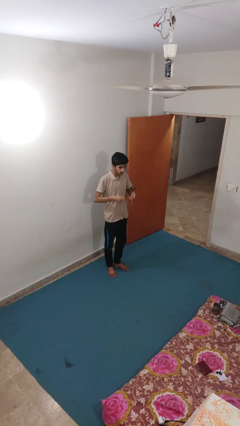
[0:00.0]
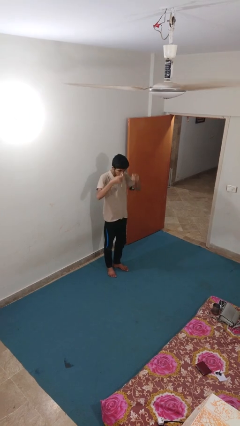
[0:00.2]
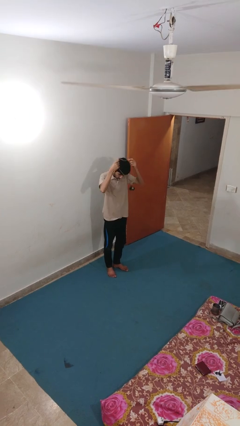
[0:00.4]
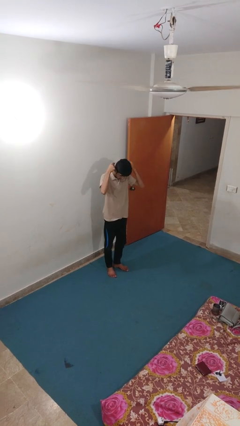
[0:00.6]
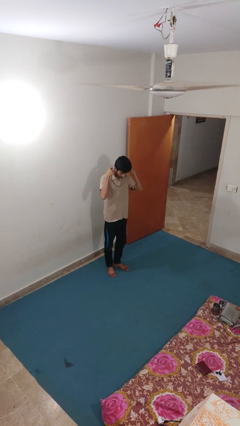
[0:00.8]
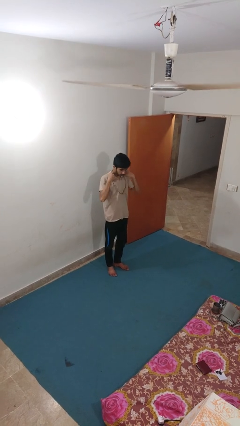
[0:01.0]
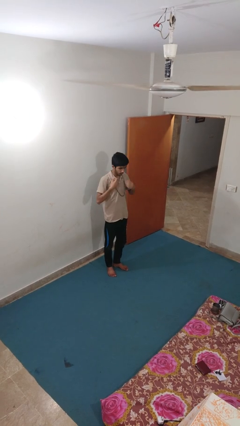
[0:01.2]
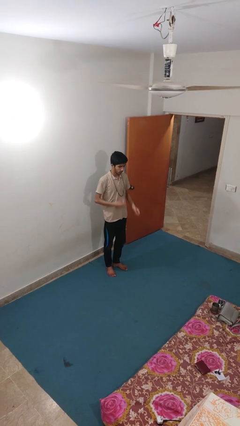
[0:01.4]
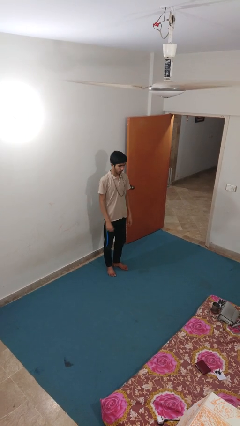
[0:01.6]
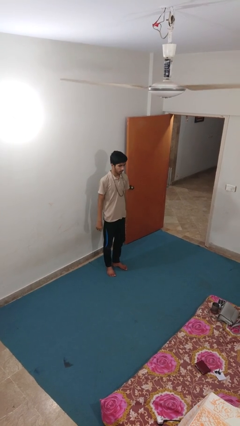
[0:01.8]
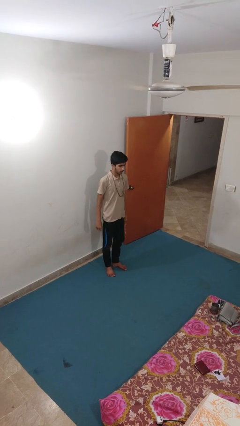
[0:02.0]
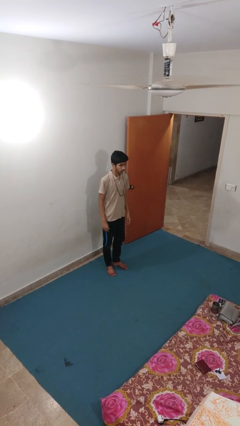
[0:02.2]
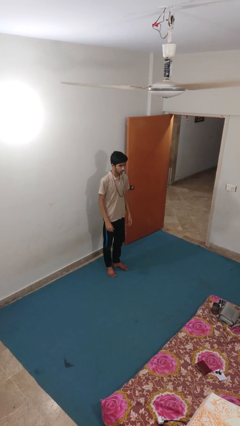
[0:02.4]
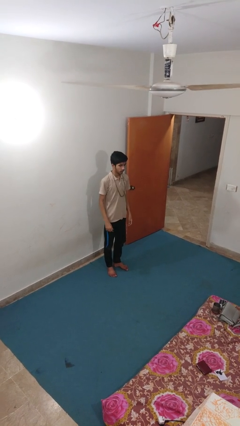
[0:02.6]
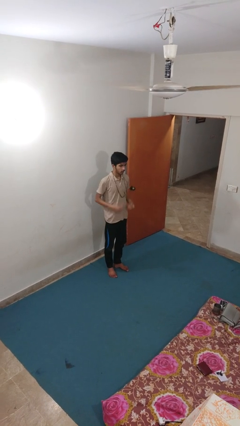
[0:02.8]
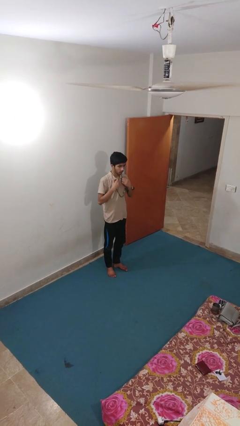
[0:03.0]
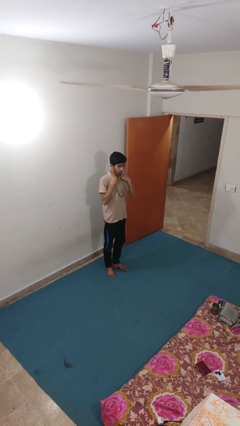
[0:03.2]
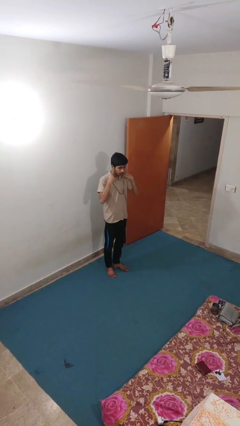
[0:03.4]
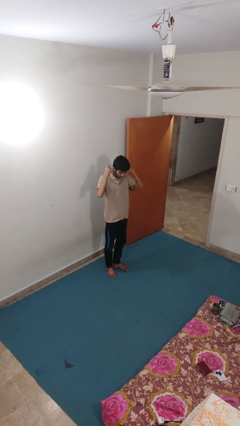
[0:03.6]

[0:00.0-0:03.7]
person puts on necklace

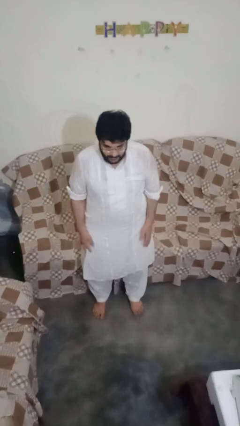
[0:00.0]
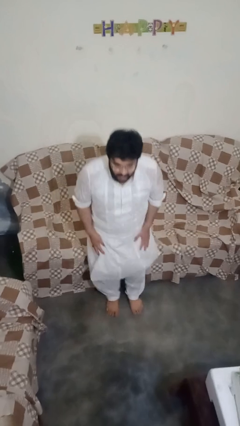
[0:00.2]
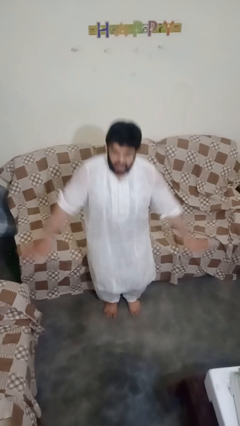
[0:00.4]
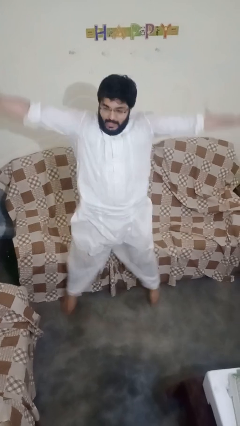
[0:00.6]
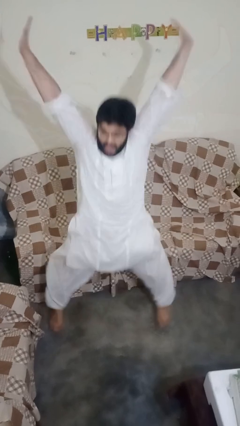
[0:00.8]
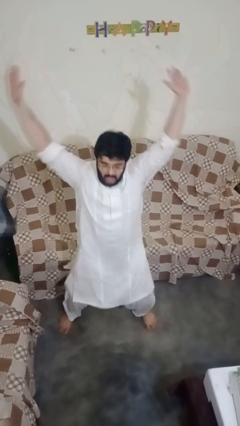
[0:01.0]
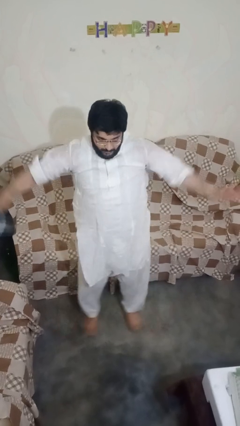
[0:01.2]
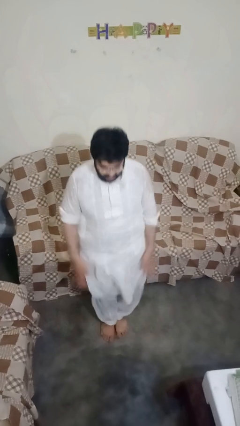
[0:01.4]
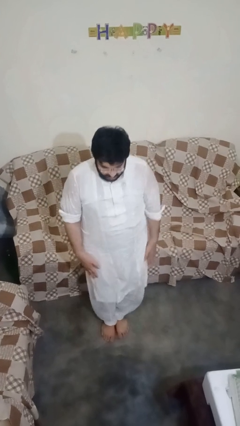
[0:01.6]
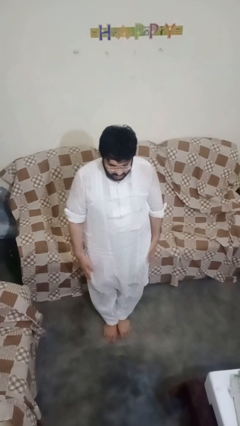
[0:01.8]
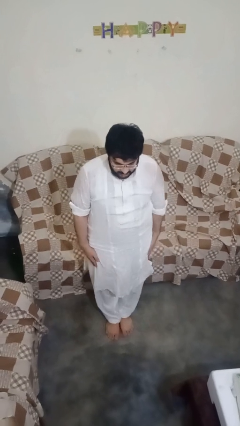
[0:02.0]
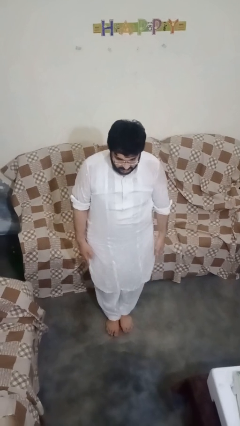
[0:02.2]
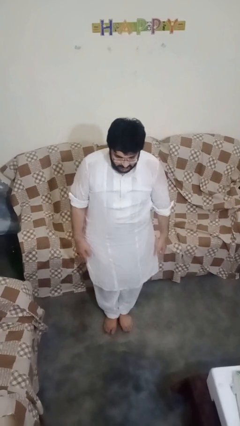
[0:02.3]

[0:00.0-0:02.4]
person exercises with jumping jacks

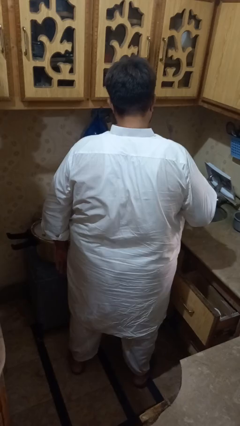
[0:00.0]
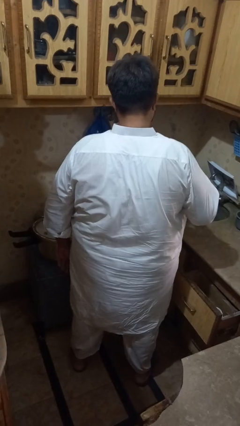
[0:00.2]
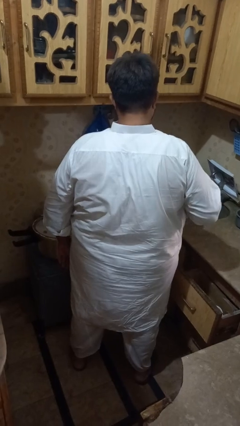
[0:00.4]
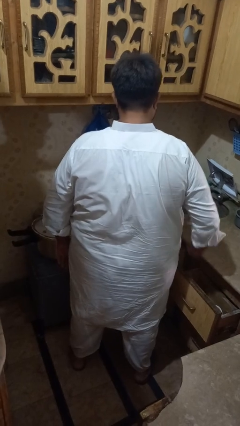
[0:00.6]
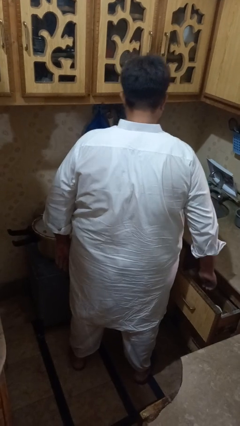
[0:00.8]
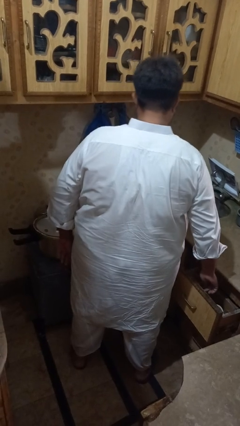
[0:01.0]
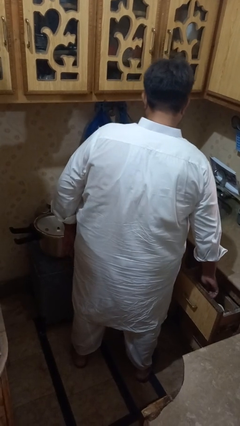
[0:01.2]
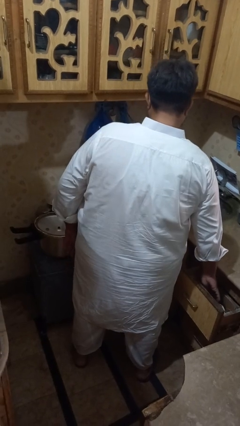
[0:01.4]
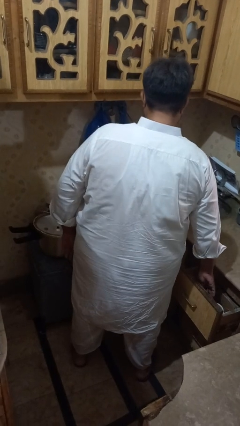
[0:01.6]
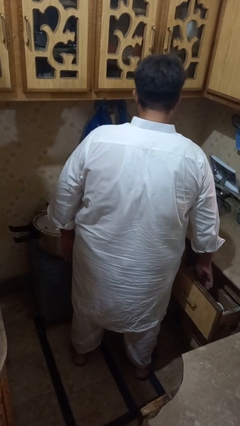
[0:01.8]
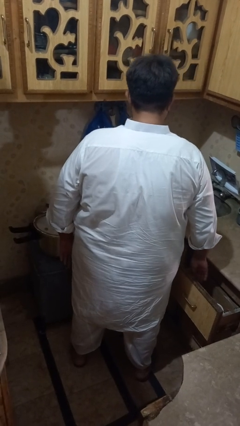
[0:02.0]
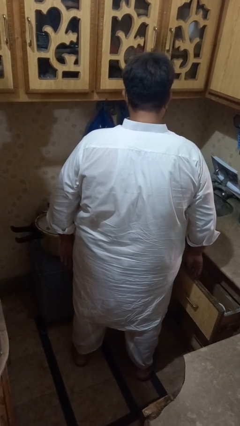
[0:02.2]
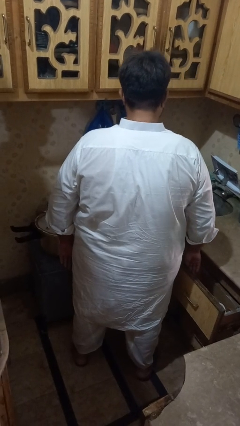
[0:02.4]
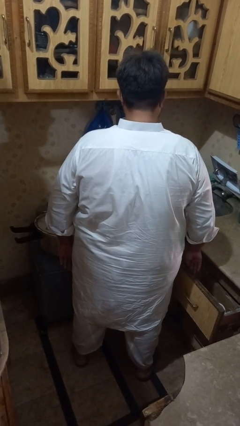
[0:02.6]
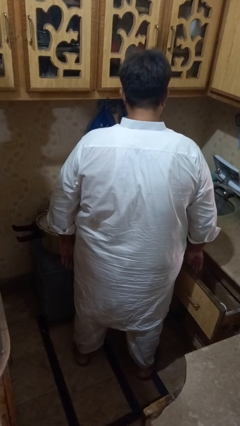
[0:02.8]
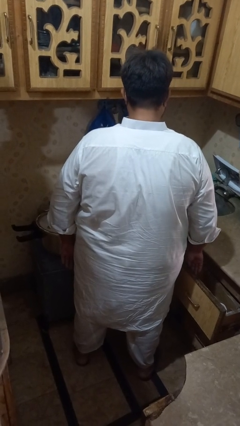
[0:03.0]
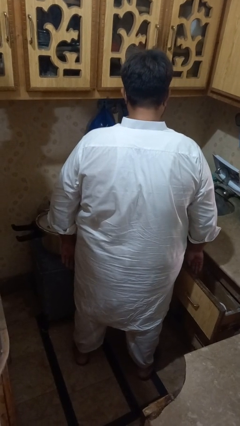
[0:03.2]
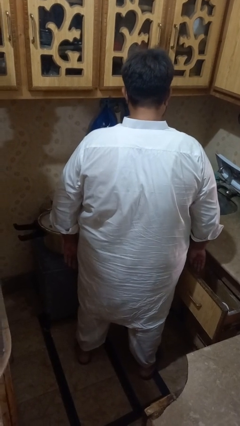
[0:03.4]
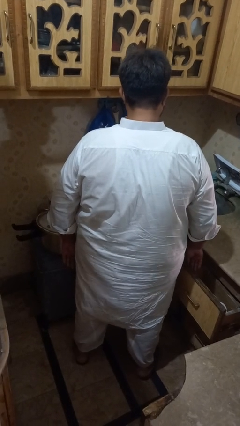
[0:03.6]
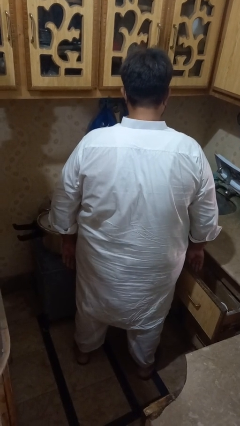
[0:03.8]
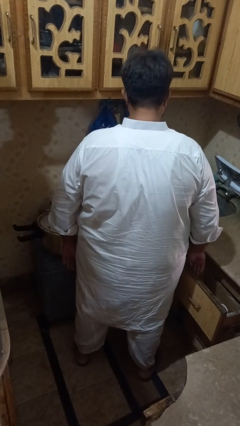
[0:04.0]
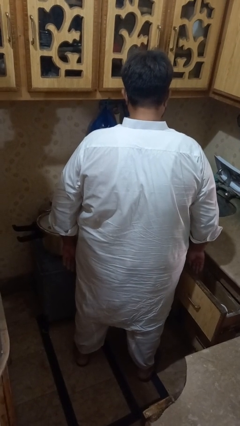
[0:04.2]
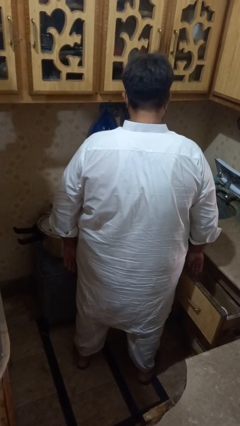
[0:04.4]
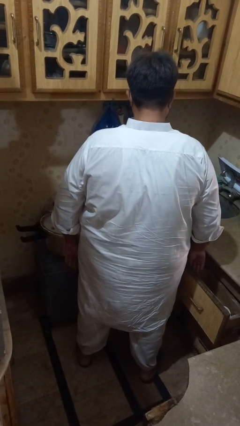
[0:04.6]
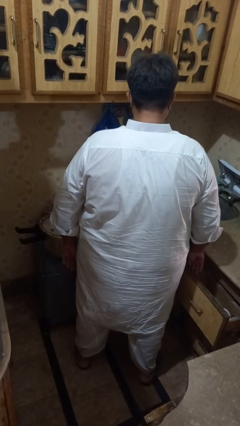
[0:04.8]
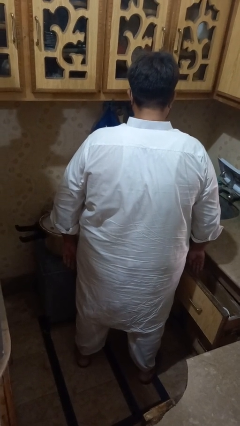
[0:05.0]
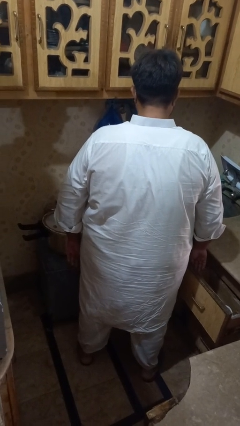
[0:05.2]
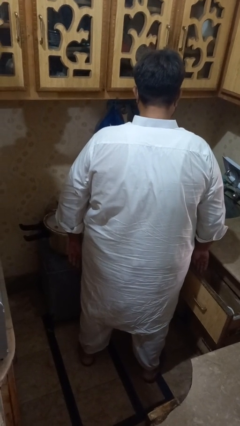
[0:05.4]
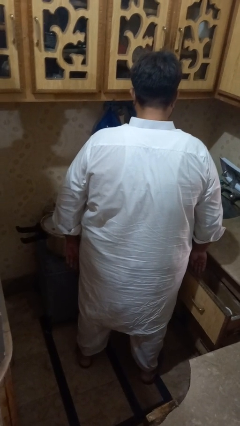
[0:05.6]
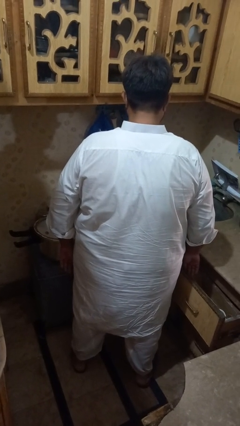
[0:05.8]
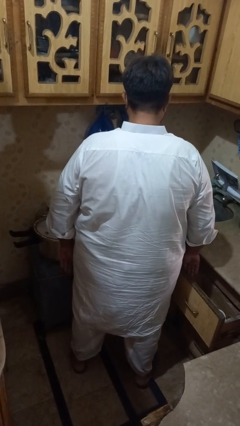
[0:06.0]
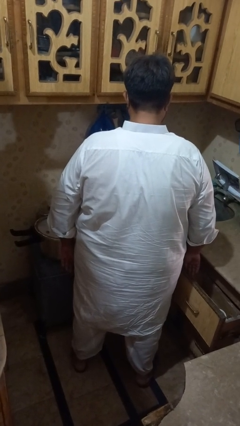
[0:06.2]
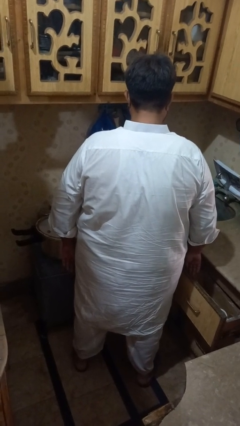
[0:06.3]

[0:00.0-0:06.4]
person puts object into kitchen drawer

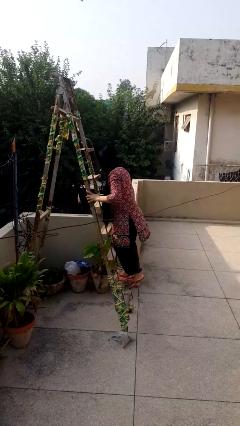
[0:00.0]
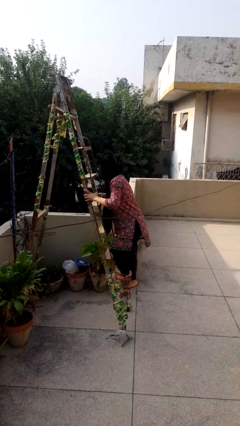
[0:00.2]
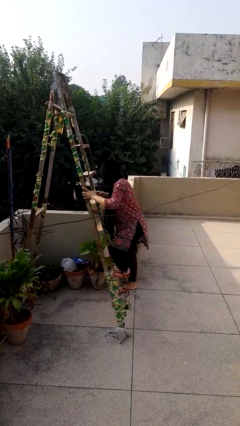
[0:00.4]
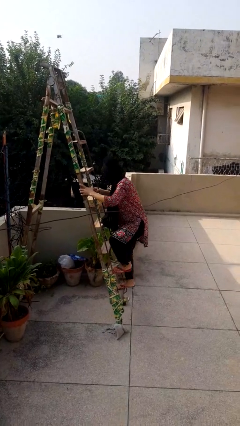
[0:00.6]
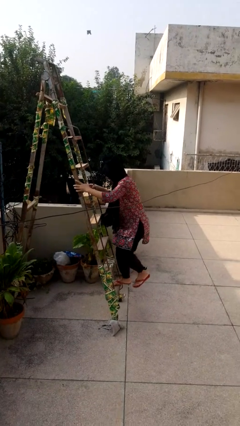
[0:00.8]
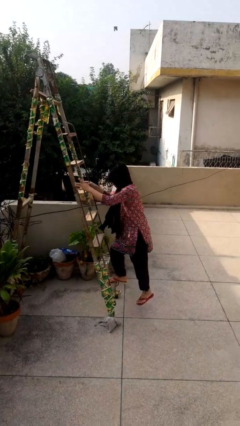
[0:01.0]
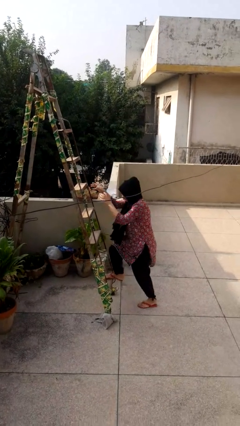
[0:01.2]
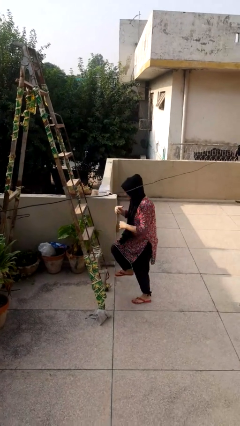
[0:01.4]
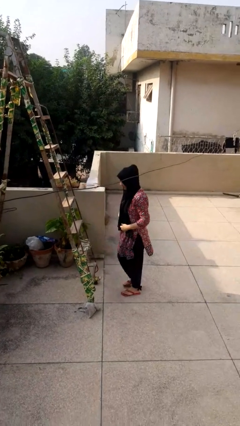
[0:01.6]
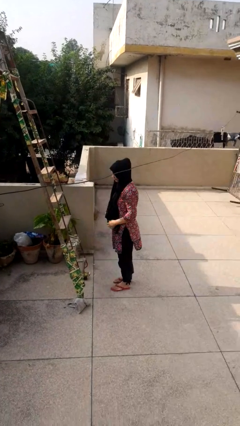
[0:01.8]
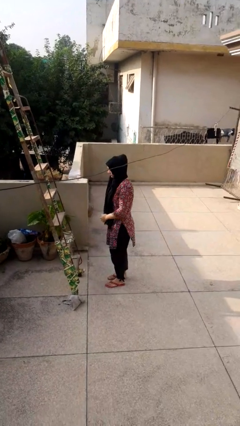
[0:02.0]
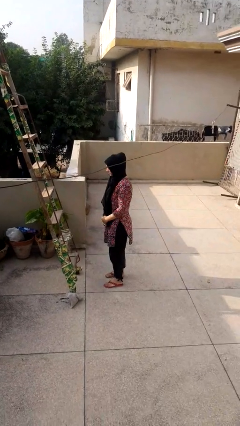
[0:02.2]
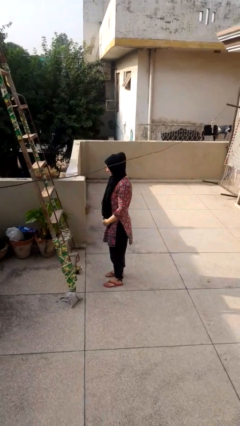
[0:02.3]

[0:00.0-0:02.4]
person climbs down ladder

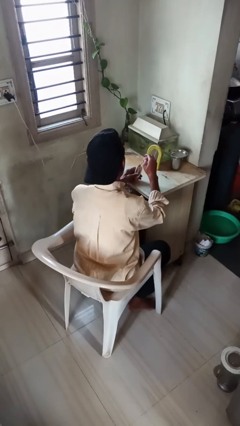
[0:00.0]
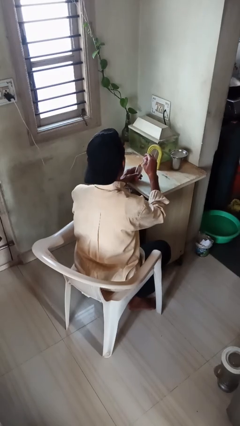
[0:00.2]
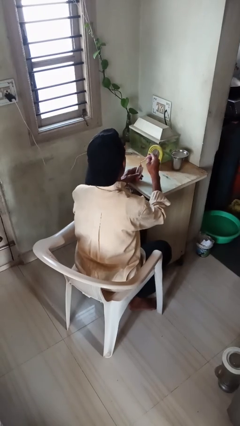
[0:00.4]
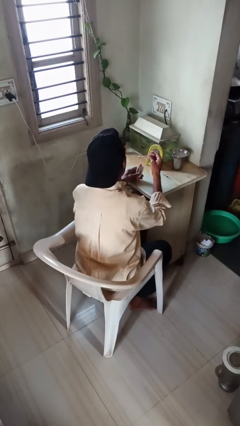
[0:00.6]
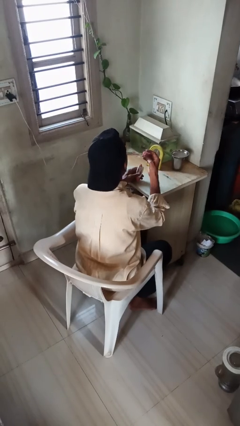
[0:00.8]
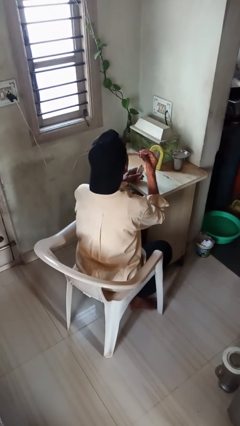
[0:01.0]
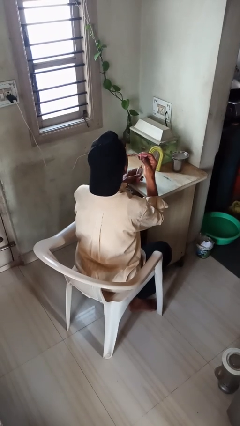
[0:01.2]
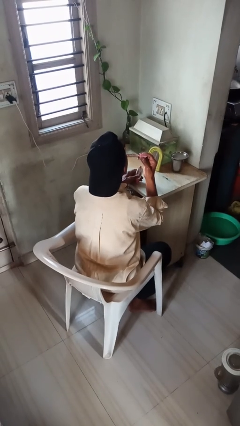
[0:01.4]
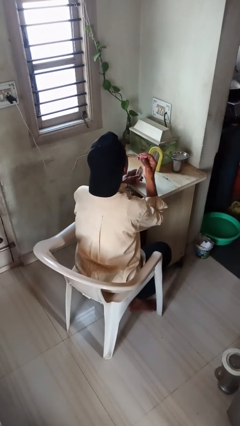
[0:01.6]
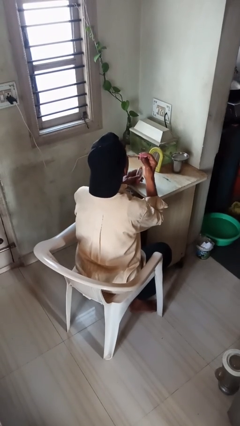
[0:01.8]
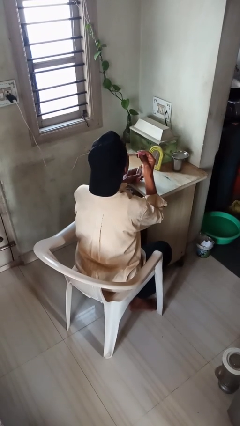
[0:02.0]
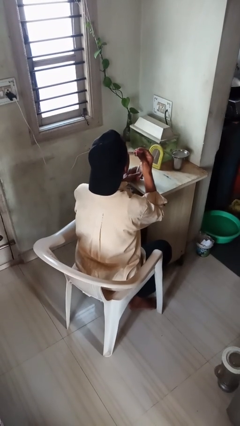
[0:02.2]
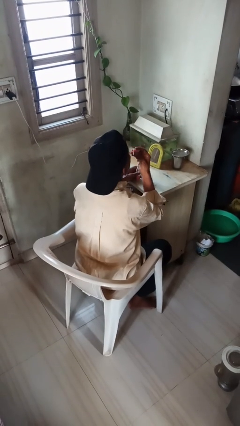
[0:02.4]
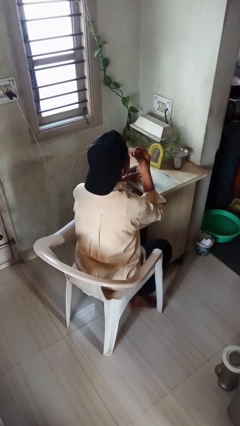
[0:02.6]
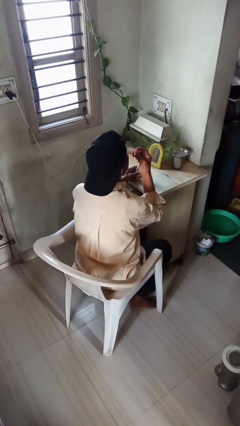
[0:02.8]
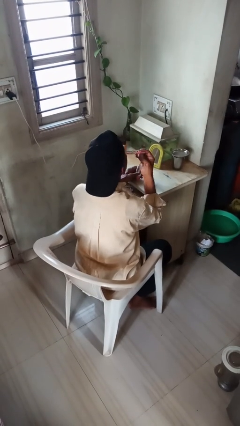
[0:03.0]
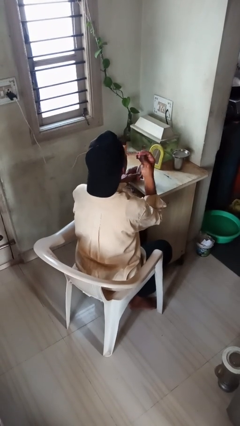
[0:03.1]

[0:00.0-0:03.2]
person applies lip makeup
